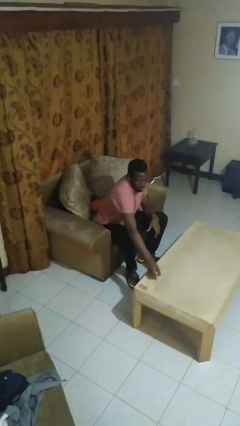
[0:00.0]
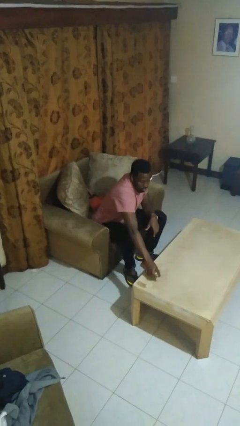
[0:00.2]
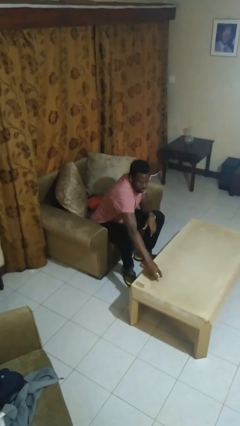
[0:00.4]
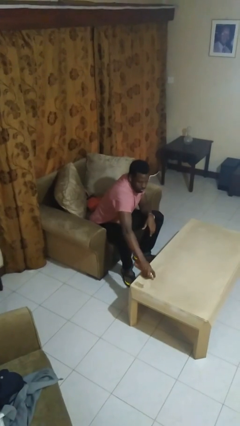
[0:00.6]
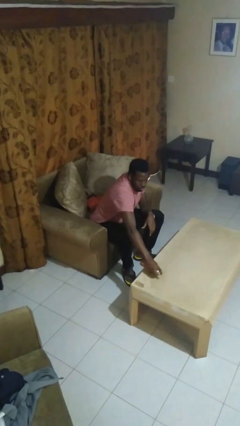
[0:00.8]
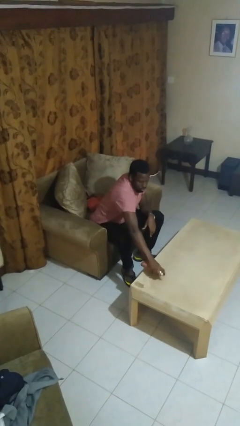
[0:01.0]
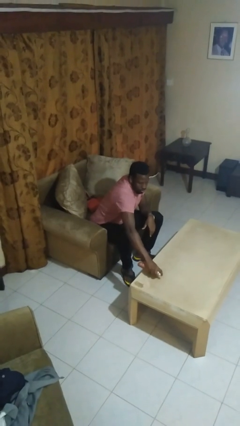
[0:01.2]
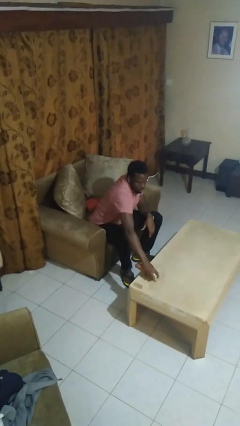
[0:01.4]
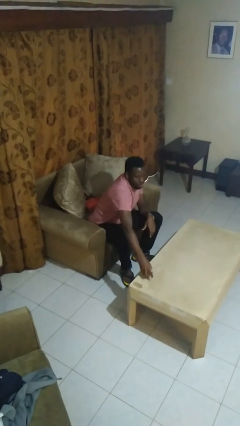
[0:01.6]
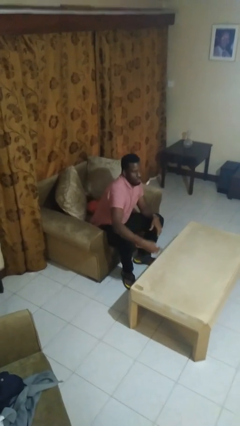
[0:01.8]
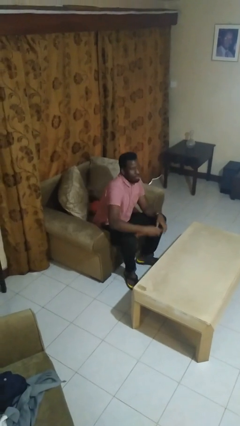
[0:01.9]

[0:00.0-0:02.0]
person sprays from bottle

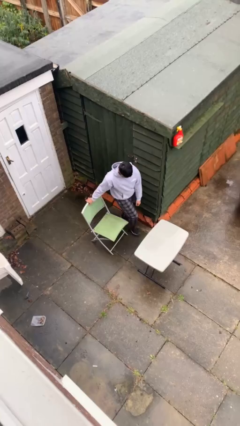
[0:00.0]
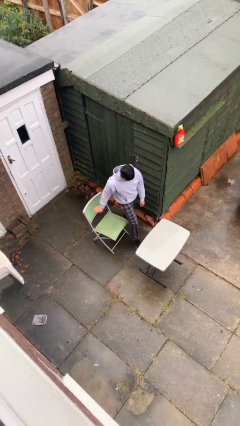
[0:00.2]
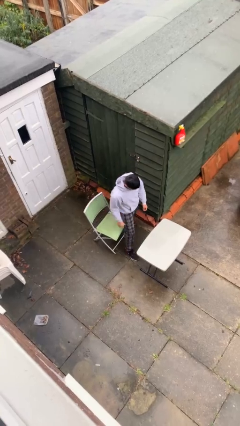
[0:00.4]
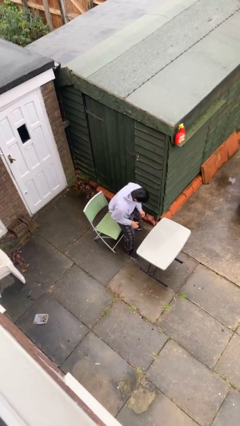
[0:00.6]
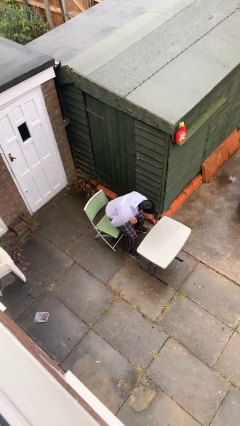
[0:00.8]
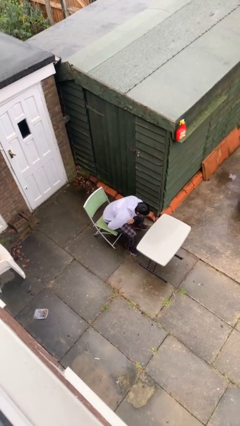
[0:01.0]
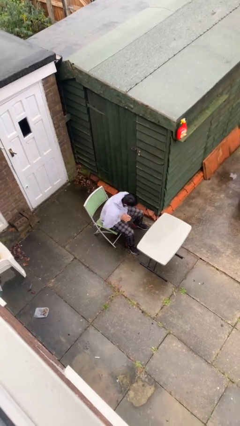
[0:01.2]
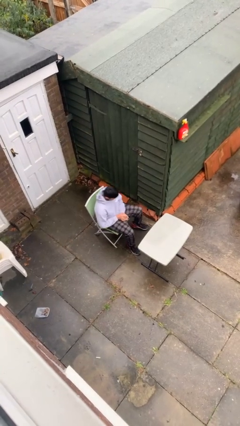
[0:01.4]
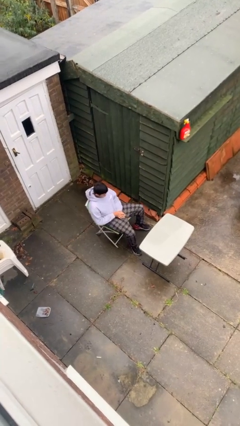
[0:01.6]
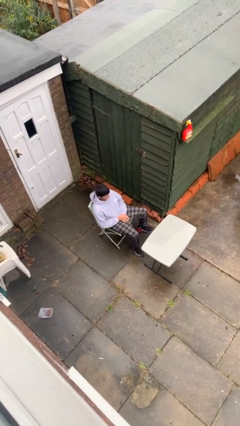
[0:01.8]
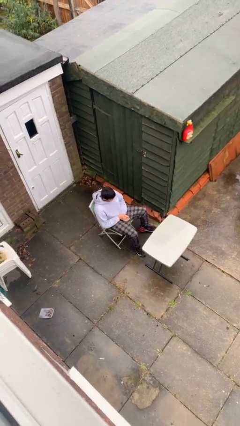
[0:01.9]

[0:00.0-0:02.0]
person sits down

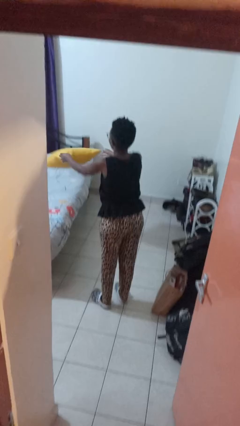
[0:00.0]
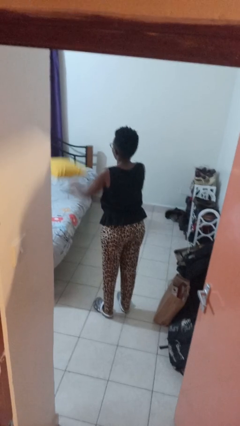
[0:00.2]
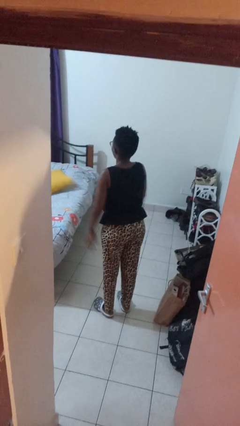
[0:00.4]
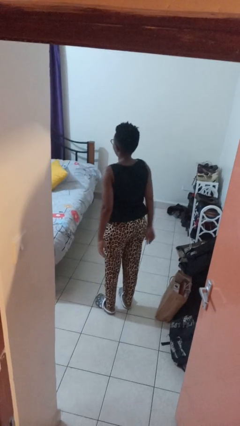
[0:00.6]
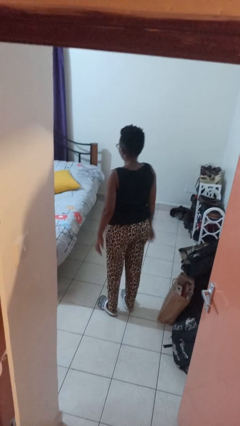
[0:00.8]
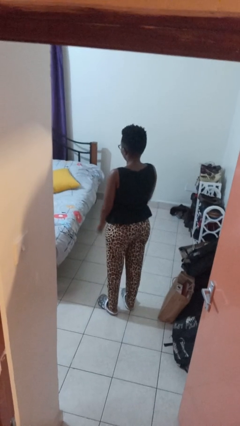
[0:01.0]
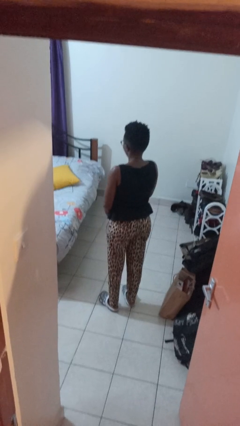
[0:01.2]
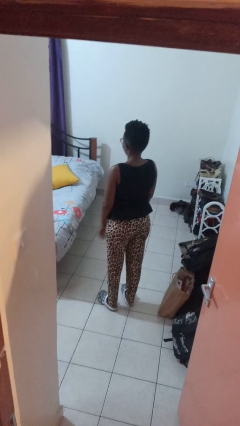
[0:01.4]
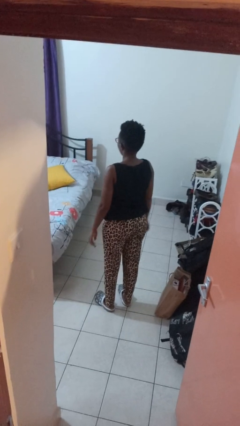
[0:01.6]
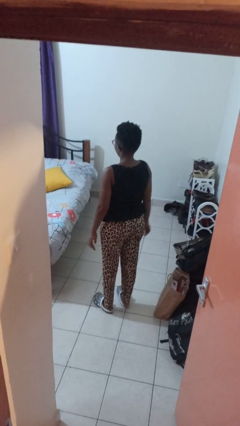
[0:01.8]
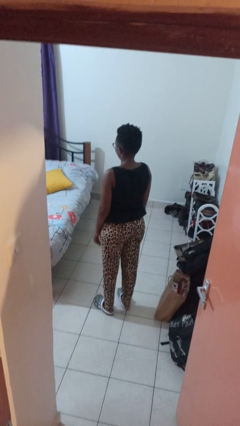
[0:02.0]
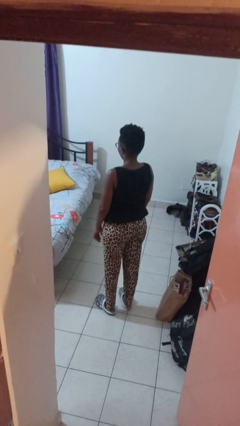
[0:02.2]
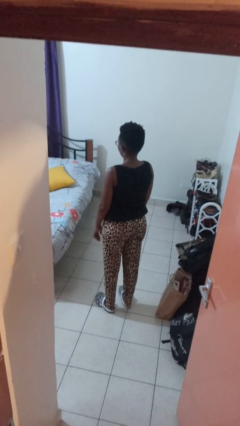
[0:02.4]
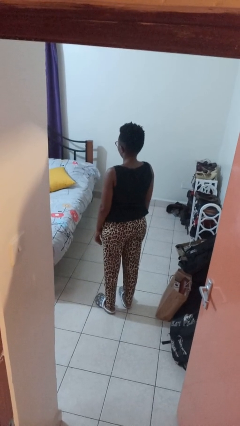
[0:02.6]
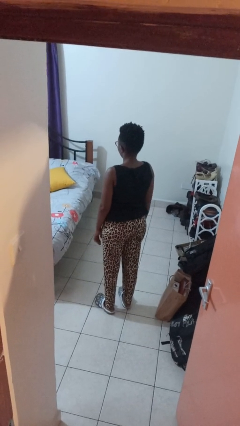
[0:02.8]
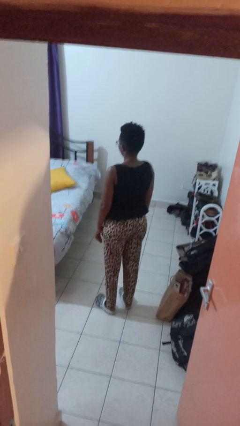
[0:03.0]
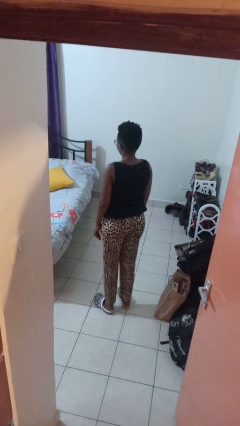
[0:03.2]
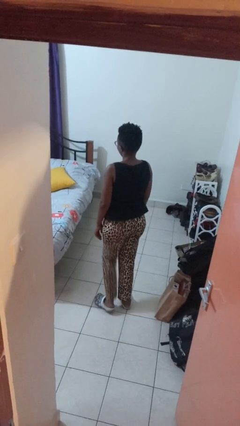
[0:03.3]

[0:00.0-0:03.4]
person throws object on bed

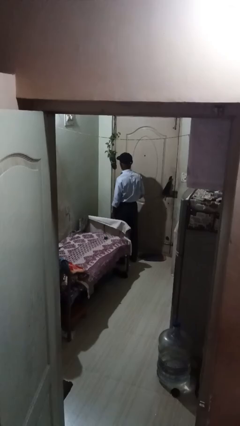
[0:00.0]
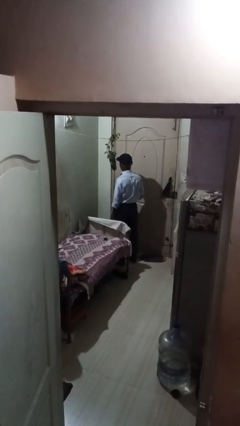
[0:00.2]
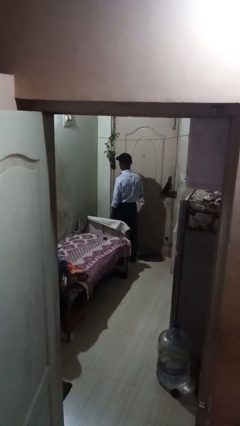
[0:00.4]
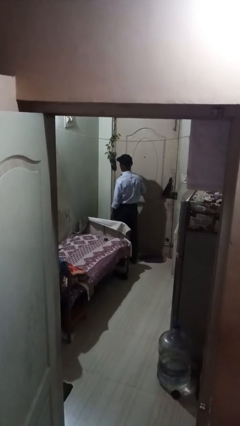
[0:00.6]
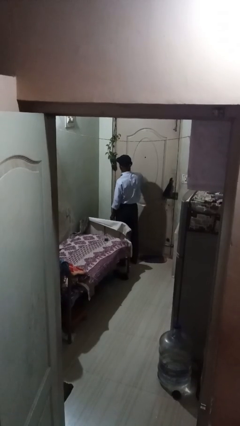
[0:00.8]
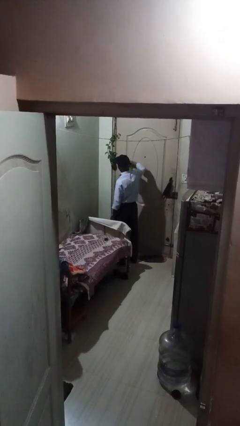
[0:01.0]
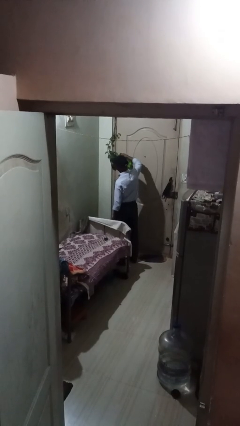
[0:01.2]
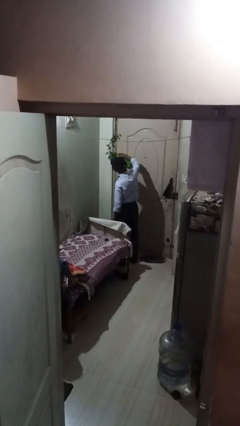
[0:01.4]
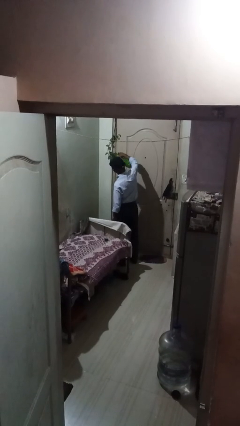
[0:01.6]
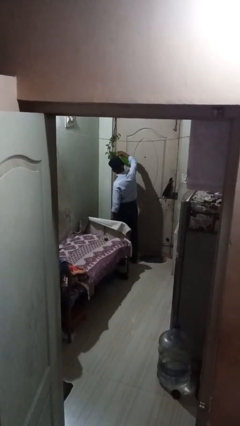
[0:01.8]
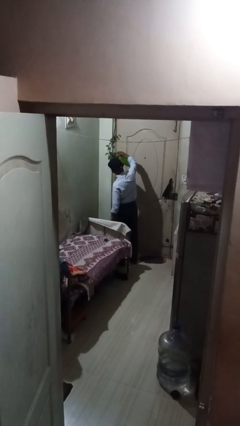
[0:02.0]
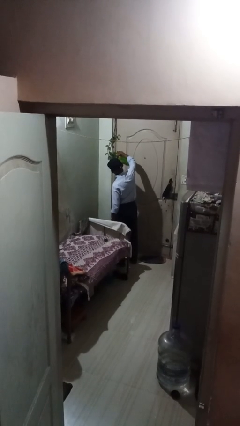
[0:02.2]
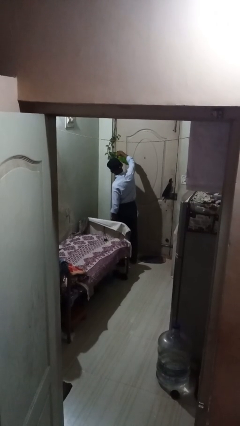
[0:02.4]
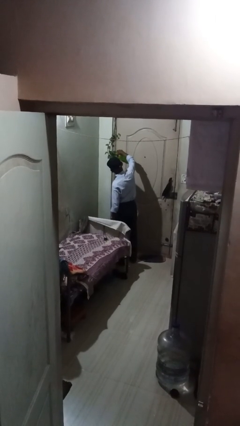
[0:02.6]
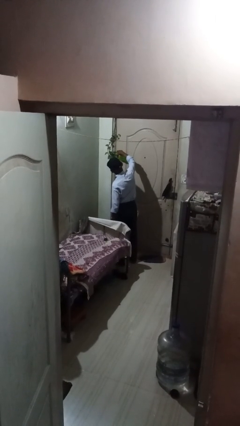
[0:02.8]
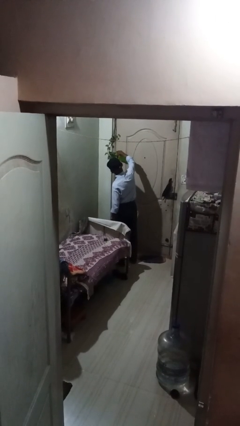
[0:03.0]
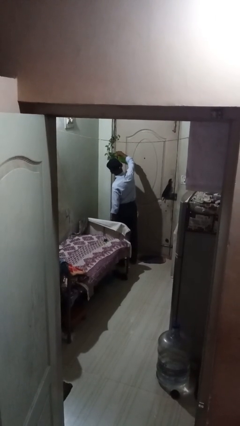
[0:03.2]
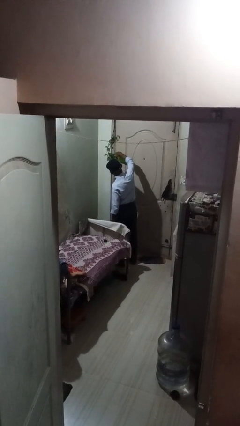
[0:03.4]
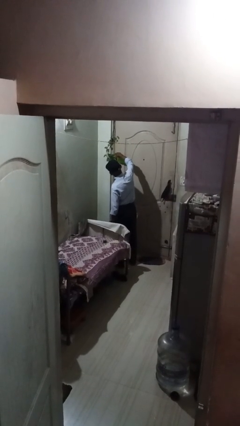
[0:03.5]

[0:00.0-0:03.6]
person waters houseplant

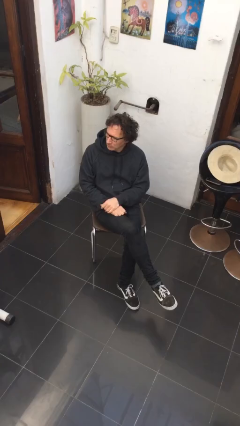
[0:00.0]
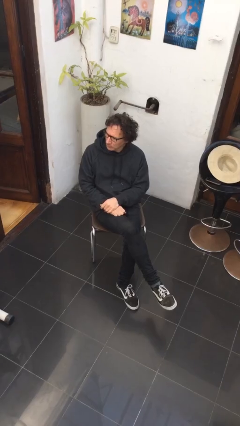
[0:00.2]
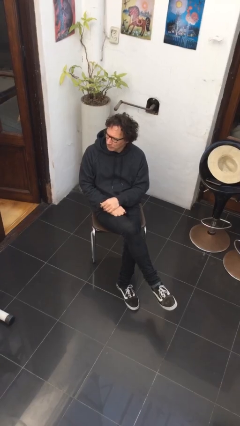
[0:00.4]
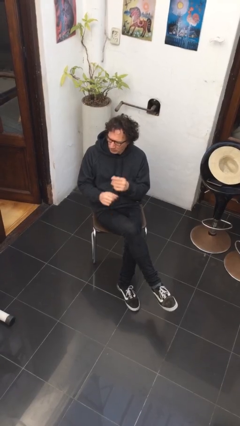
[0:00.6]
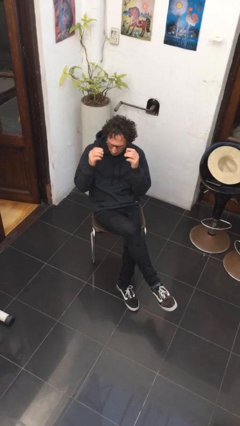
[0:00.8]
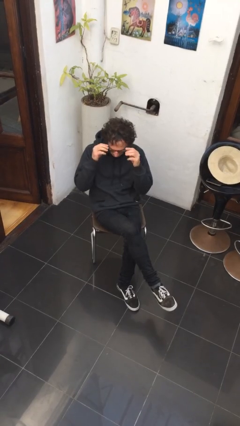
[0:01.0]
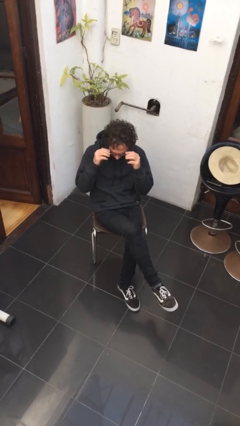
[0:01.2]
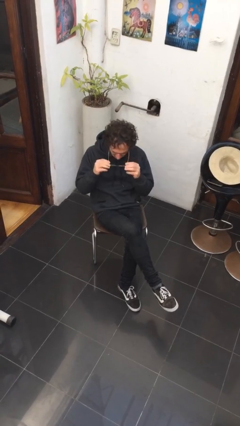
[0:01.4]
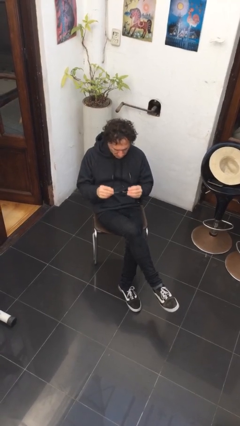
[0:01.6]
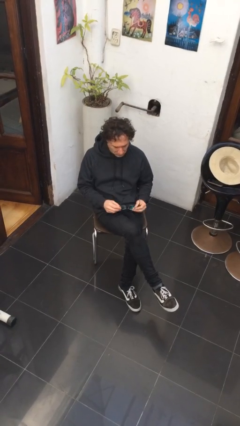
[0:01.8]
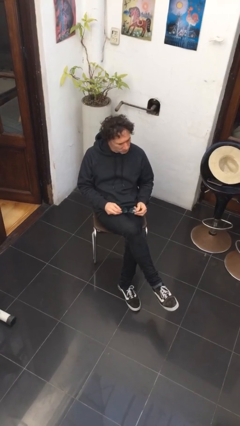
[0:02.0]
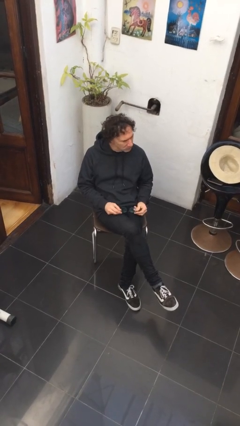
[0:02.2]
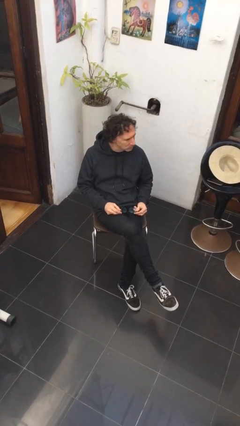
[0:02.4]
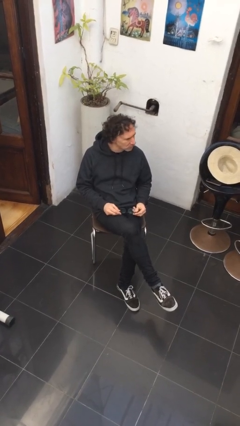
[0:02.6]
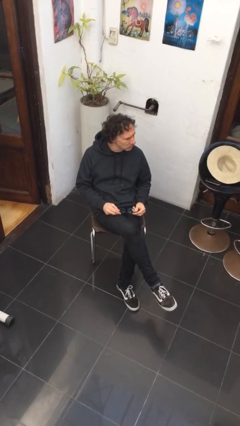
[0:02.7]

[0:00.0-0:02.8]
person takes off glasses

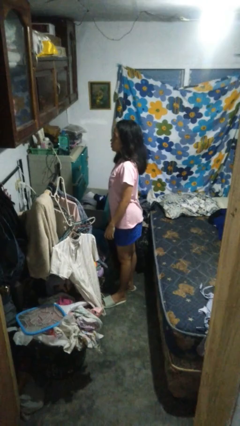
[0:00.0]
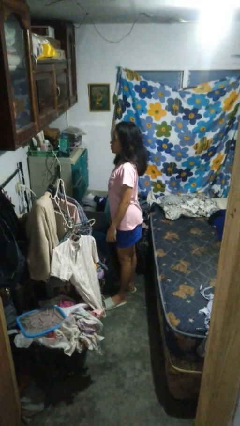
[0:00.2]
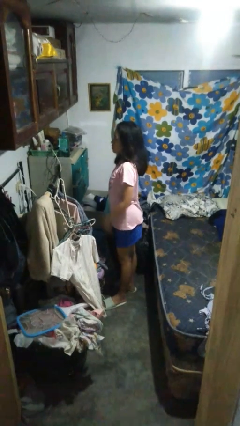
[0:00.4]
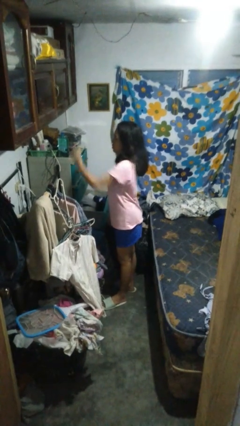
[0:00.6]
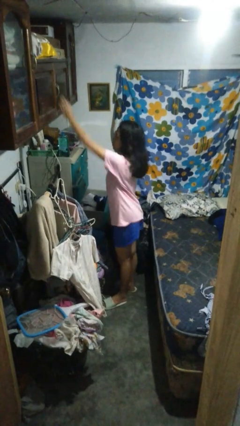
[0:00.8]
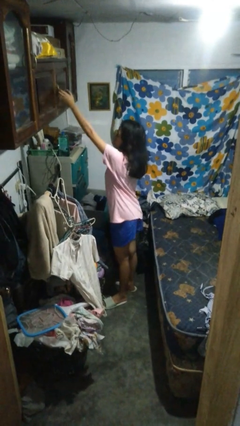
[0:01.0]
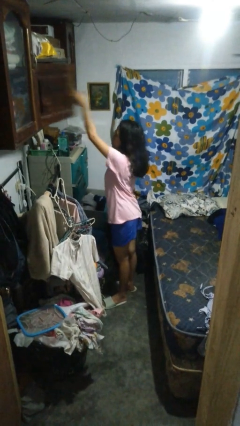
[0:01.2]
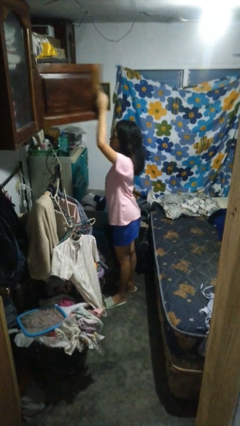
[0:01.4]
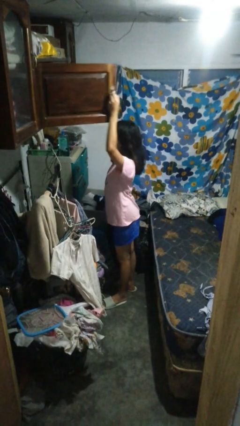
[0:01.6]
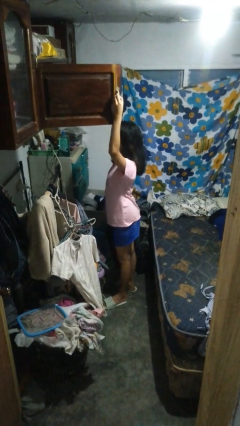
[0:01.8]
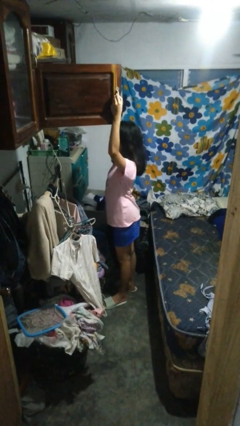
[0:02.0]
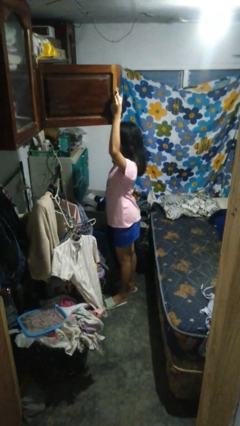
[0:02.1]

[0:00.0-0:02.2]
person opens closet door

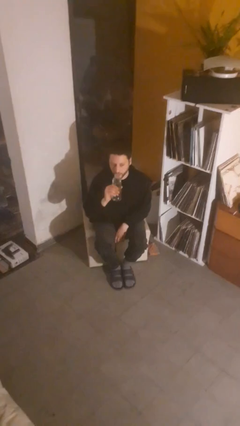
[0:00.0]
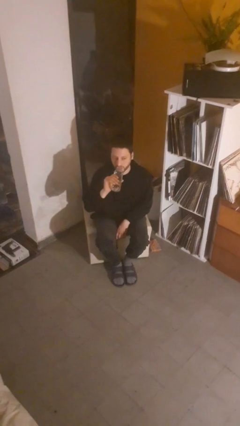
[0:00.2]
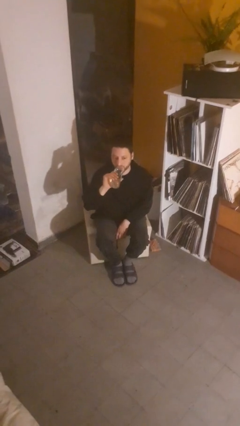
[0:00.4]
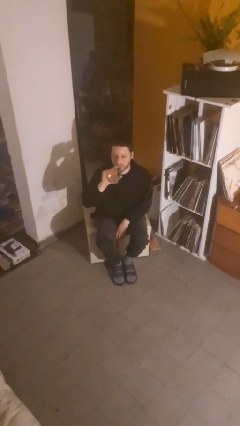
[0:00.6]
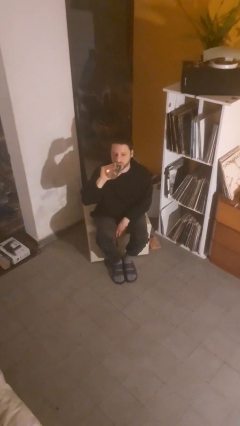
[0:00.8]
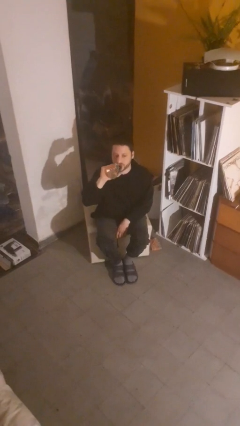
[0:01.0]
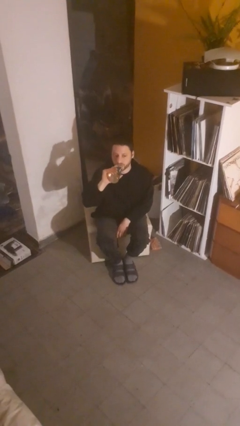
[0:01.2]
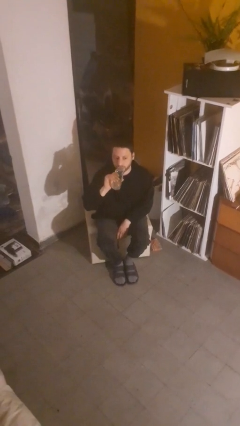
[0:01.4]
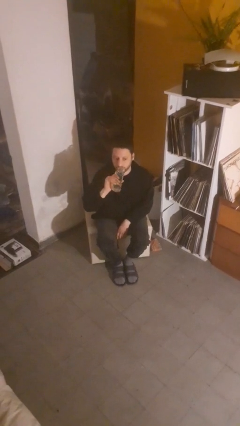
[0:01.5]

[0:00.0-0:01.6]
person drinks from bottle
